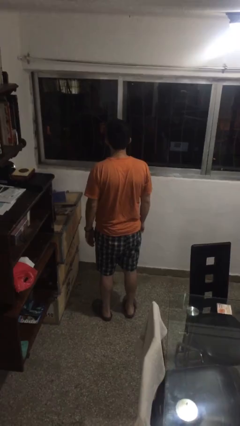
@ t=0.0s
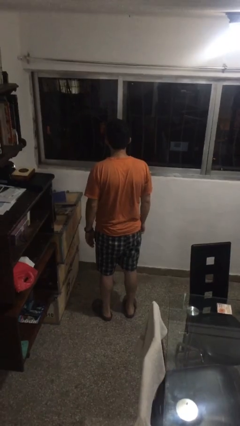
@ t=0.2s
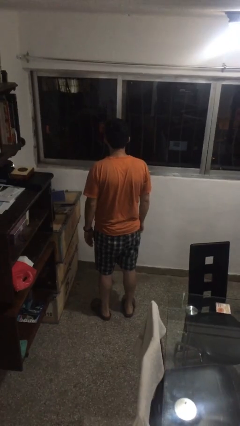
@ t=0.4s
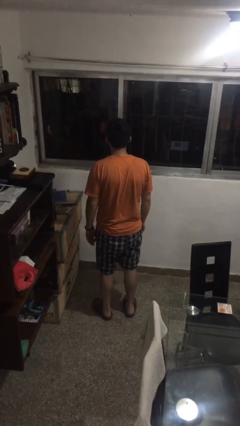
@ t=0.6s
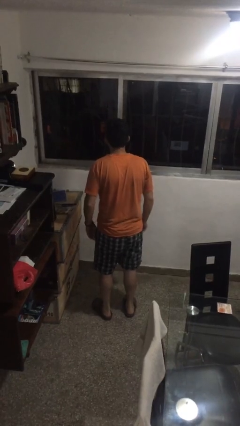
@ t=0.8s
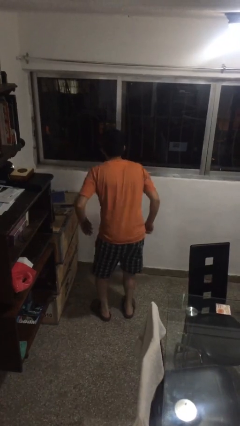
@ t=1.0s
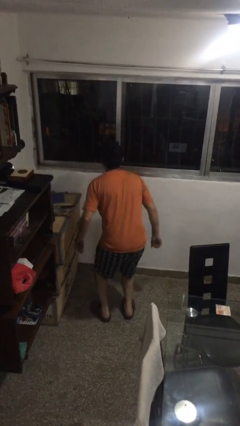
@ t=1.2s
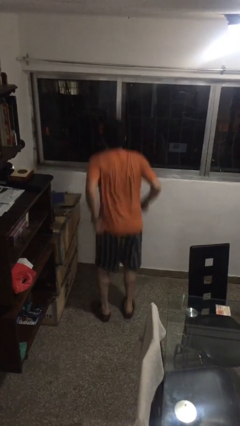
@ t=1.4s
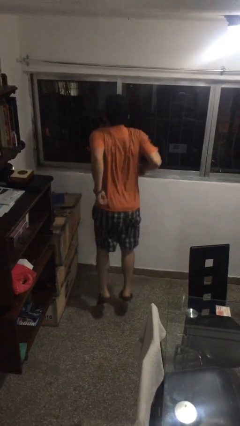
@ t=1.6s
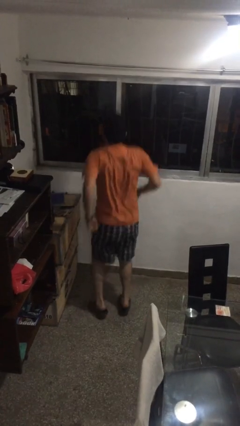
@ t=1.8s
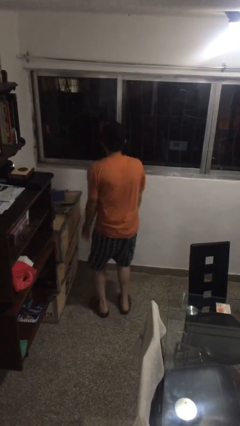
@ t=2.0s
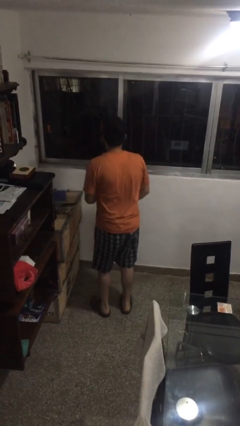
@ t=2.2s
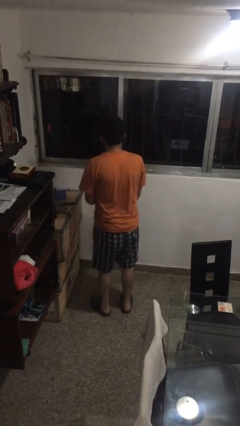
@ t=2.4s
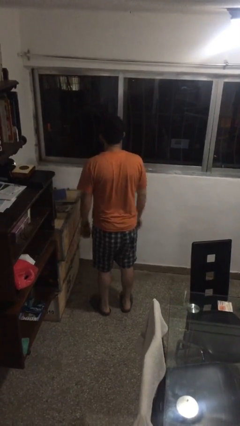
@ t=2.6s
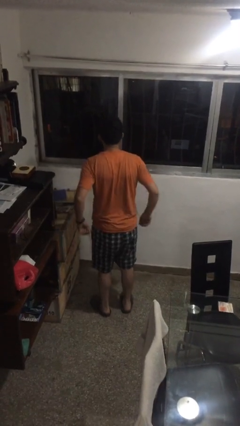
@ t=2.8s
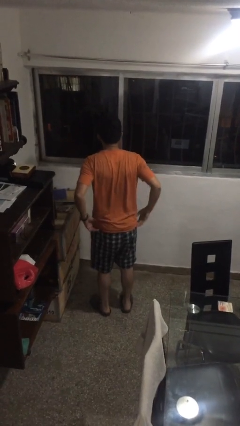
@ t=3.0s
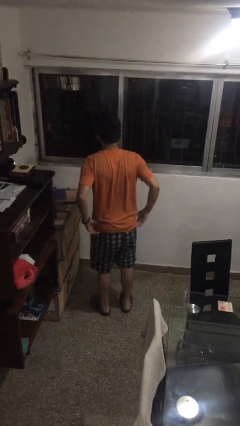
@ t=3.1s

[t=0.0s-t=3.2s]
person jumps

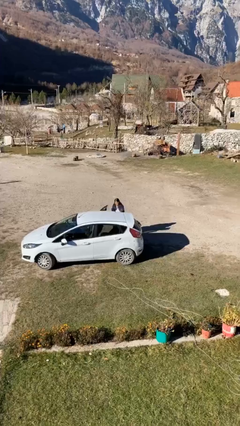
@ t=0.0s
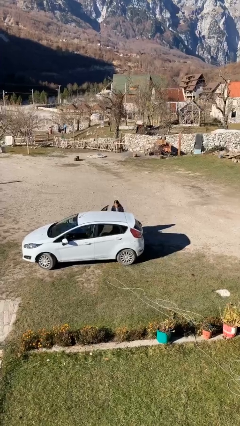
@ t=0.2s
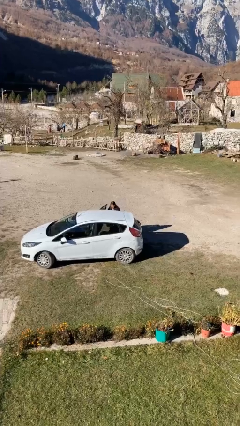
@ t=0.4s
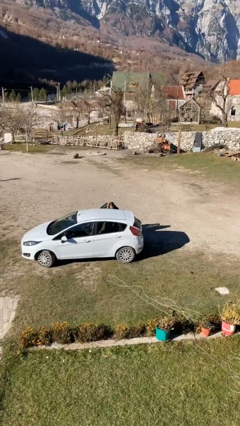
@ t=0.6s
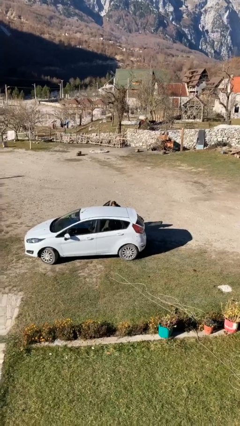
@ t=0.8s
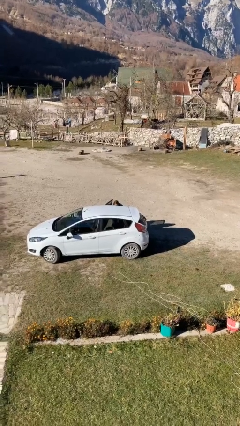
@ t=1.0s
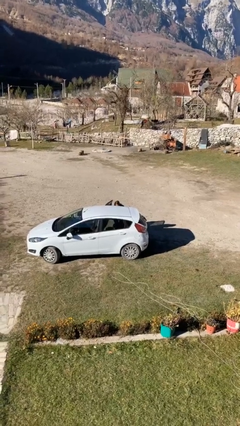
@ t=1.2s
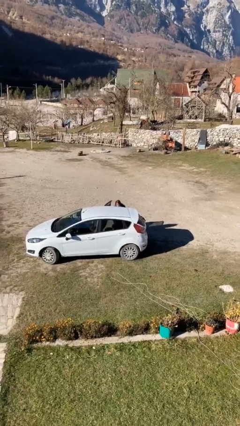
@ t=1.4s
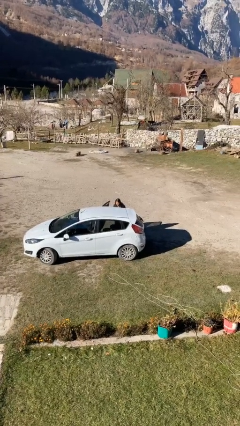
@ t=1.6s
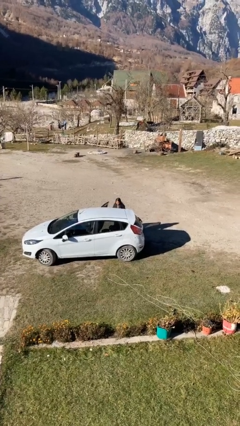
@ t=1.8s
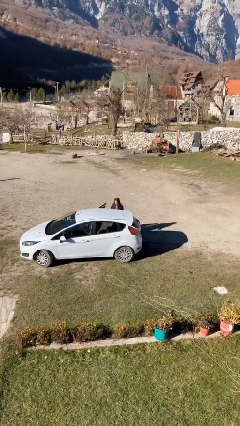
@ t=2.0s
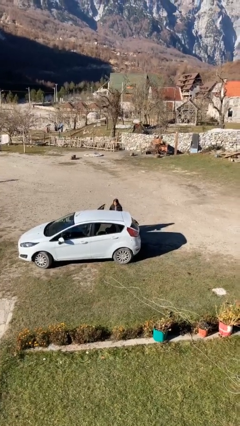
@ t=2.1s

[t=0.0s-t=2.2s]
person loads car

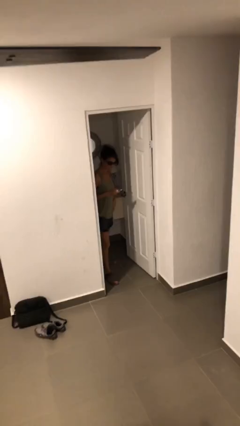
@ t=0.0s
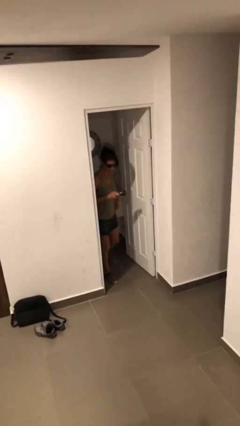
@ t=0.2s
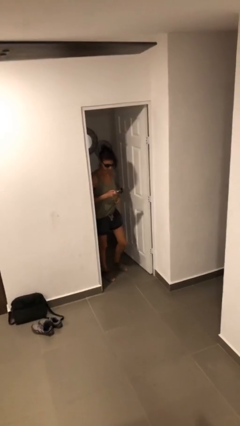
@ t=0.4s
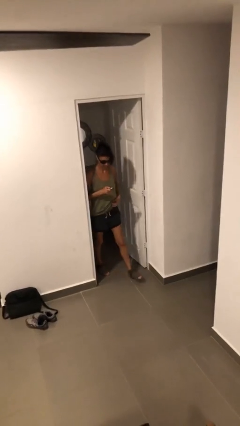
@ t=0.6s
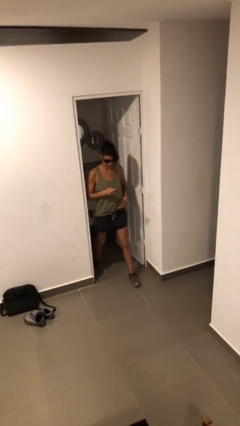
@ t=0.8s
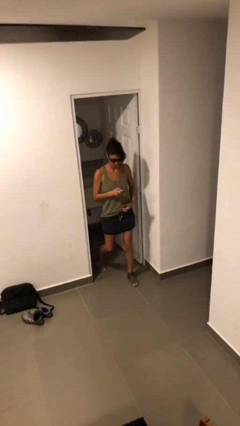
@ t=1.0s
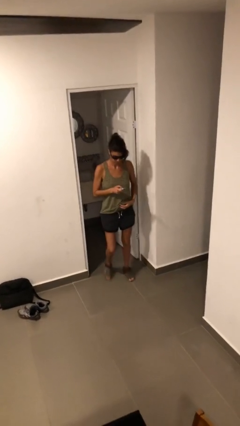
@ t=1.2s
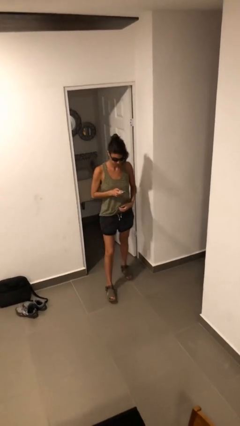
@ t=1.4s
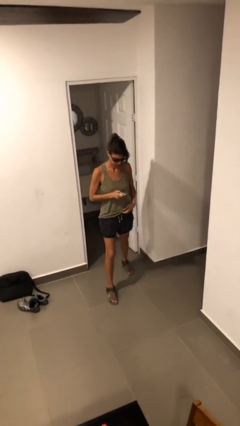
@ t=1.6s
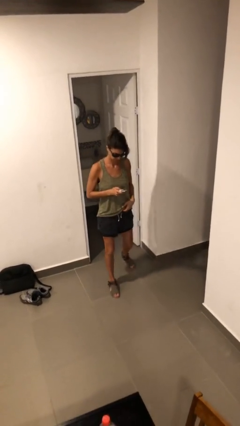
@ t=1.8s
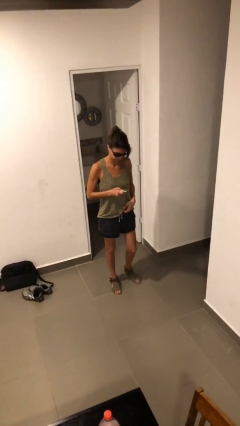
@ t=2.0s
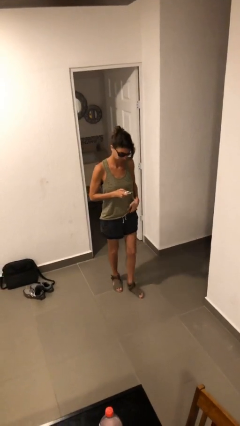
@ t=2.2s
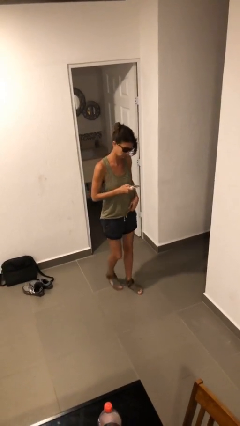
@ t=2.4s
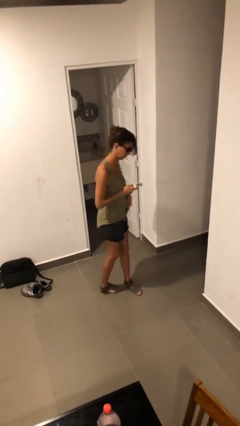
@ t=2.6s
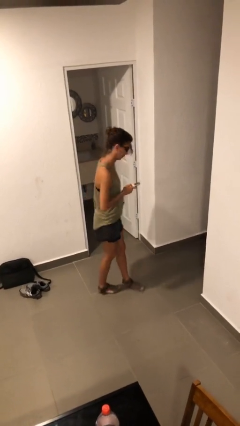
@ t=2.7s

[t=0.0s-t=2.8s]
person enters scene through structure

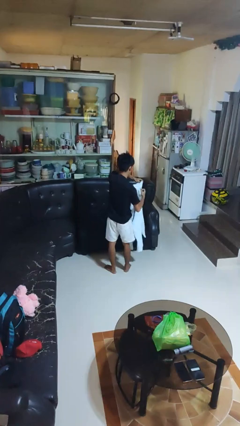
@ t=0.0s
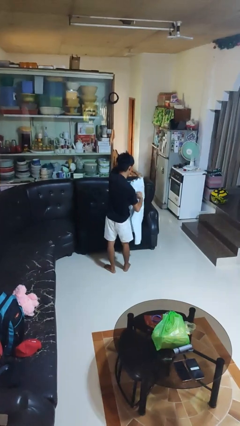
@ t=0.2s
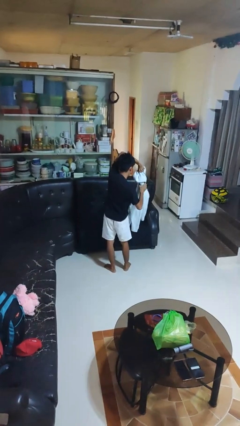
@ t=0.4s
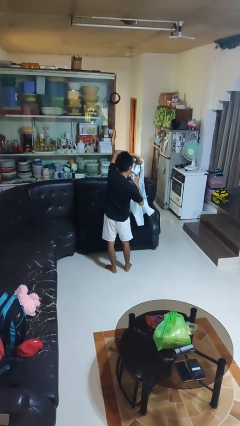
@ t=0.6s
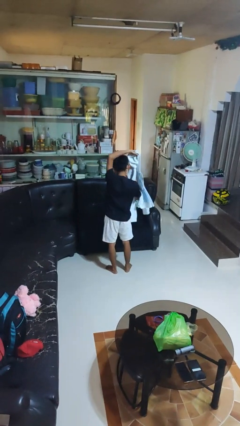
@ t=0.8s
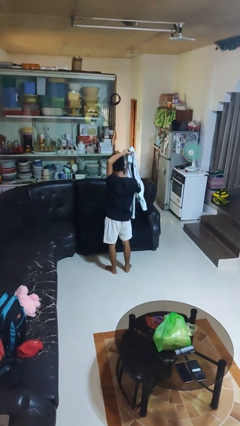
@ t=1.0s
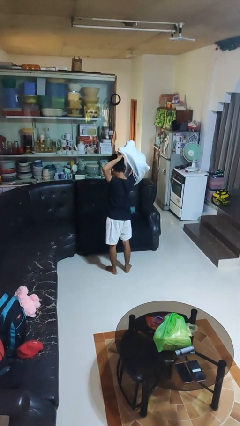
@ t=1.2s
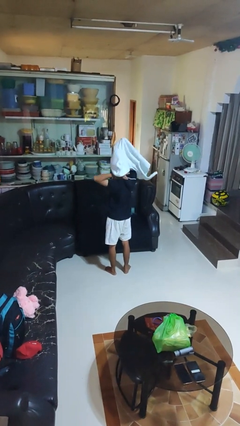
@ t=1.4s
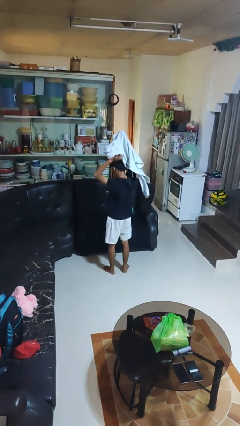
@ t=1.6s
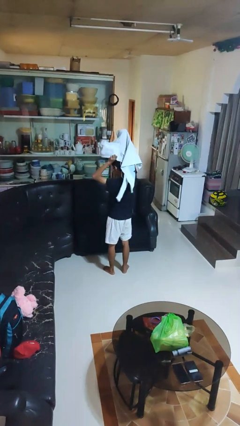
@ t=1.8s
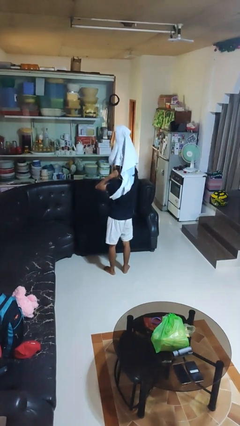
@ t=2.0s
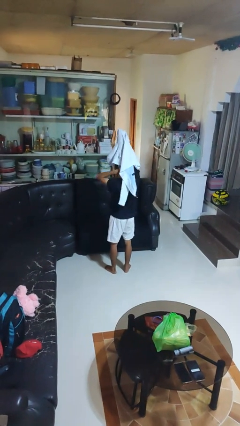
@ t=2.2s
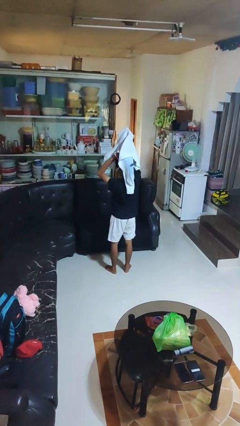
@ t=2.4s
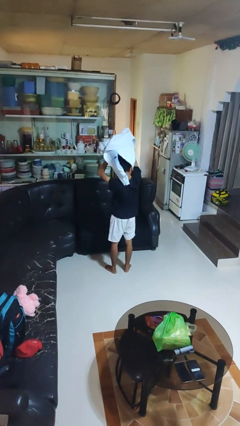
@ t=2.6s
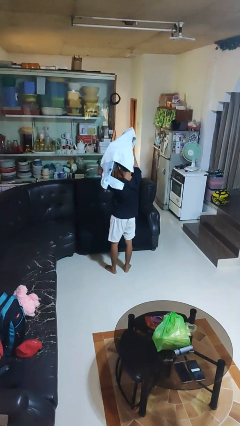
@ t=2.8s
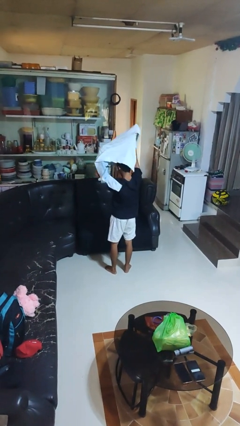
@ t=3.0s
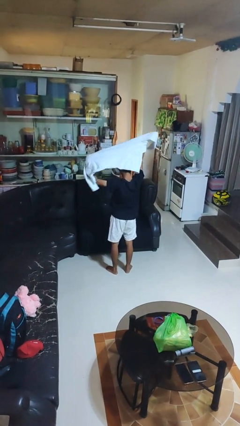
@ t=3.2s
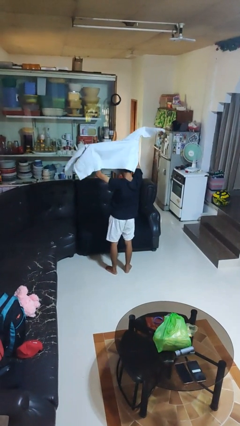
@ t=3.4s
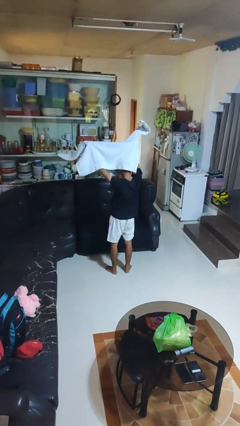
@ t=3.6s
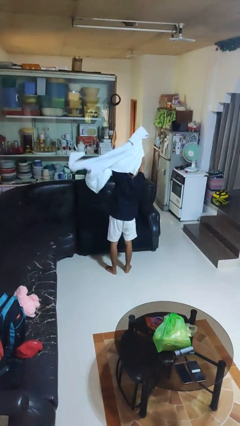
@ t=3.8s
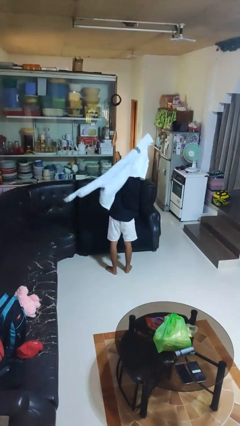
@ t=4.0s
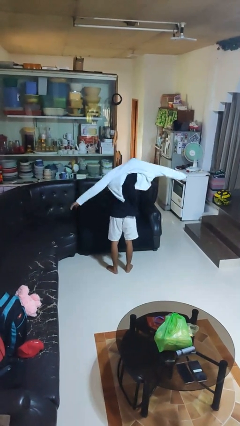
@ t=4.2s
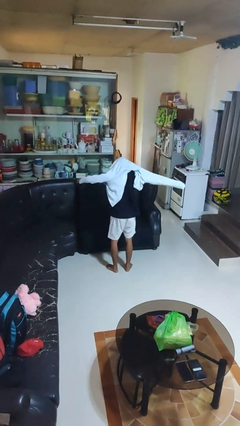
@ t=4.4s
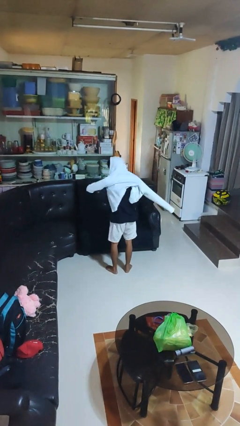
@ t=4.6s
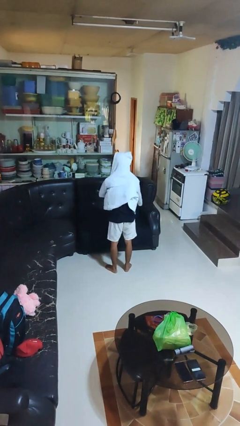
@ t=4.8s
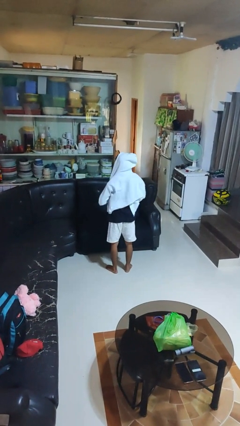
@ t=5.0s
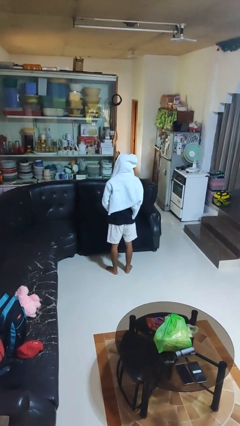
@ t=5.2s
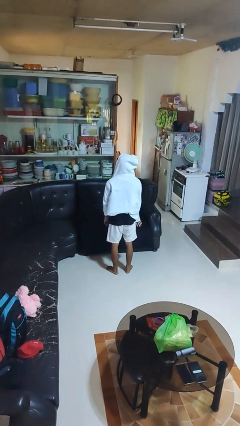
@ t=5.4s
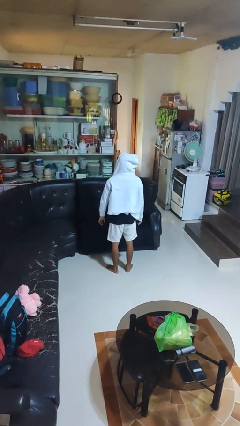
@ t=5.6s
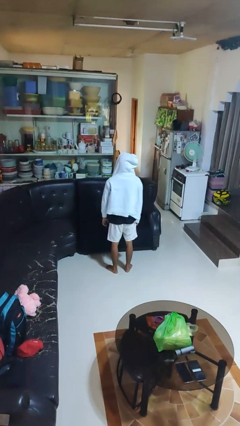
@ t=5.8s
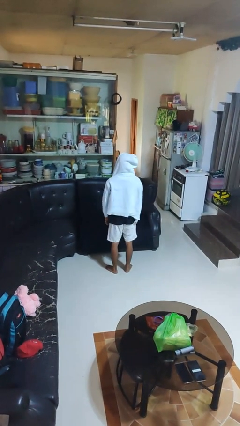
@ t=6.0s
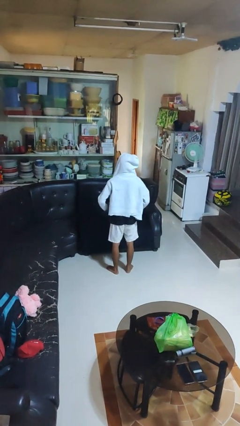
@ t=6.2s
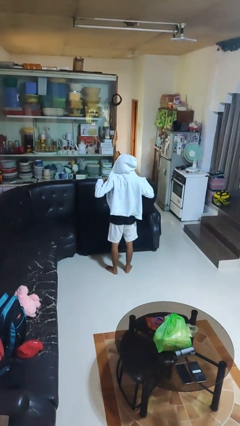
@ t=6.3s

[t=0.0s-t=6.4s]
person puts on hoodie

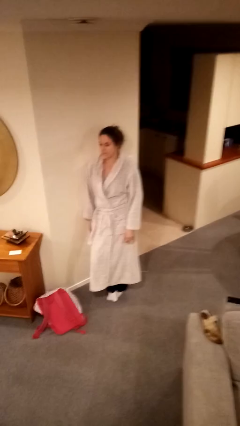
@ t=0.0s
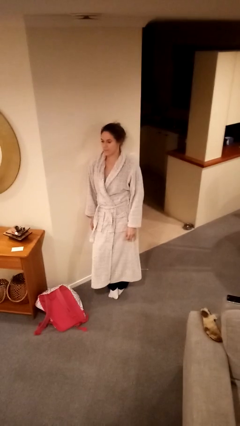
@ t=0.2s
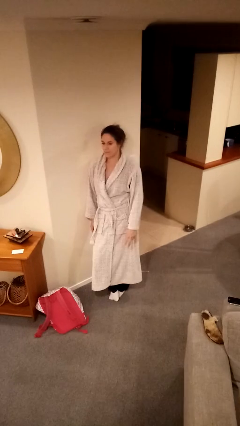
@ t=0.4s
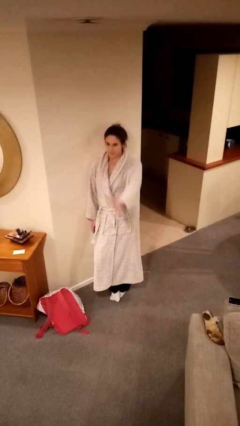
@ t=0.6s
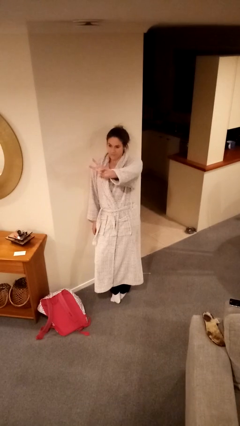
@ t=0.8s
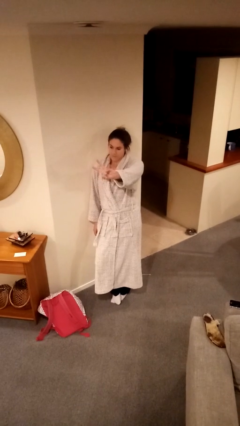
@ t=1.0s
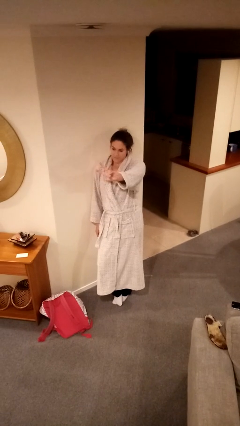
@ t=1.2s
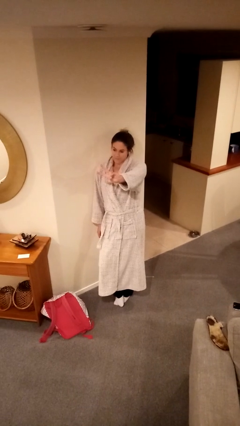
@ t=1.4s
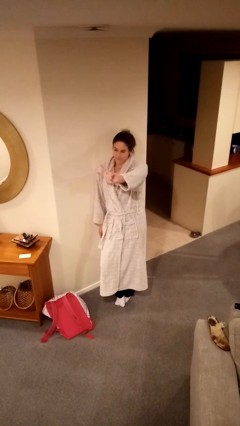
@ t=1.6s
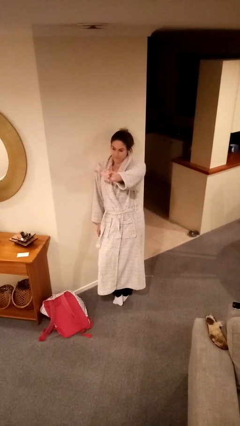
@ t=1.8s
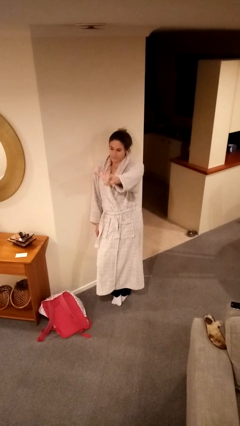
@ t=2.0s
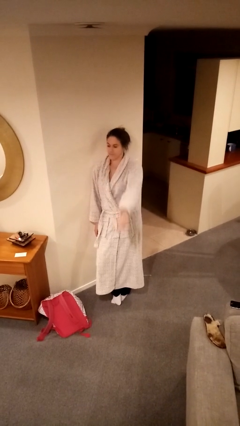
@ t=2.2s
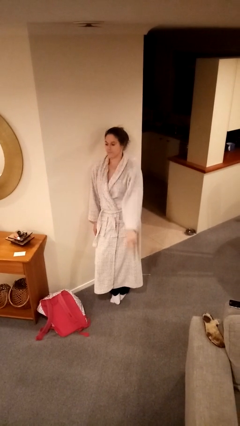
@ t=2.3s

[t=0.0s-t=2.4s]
person gestures peace

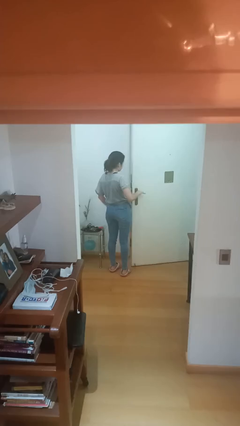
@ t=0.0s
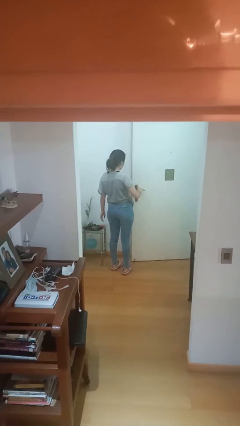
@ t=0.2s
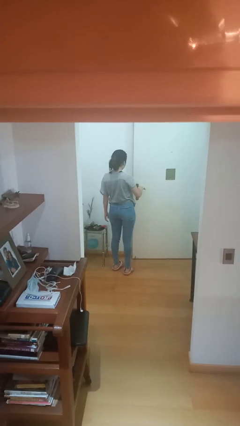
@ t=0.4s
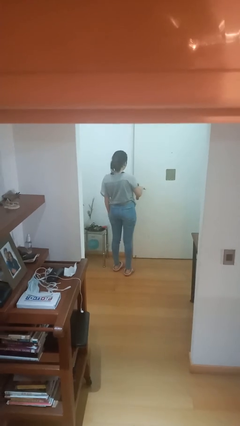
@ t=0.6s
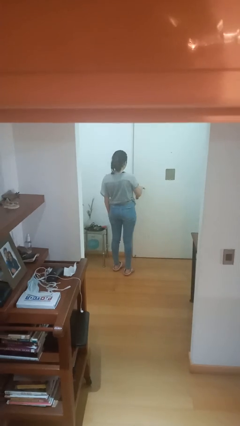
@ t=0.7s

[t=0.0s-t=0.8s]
person closes facility door
